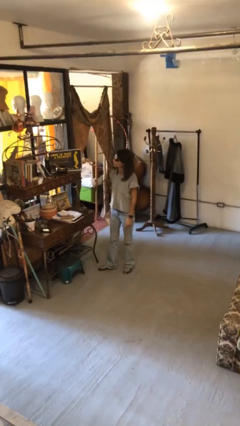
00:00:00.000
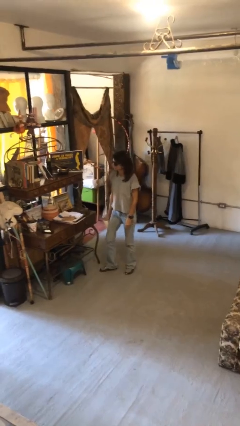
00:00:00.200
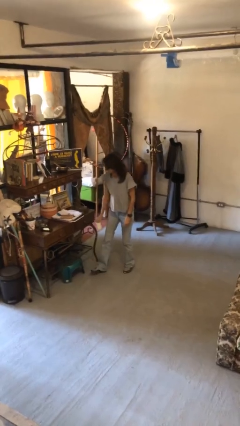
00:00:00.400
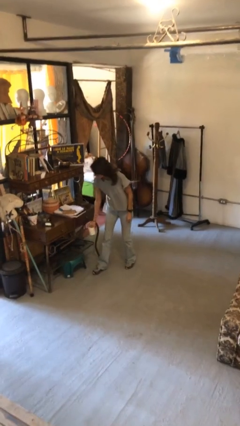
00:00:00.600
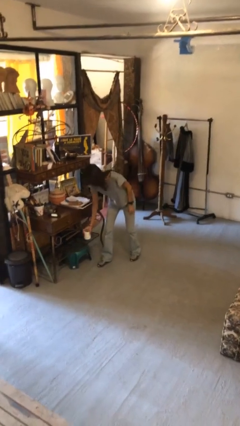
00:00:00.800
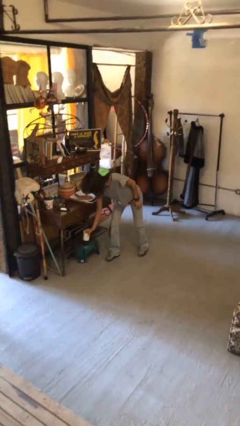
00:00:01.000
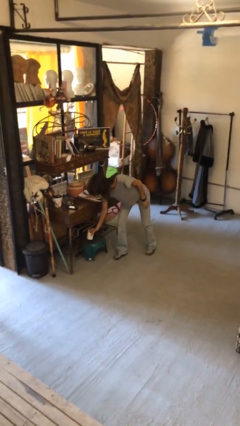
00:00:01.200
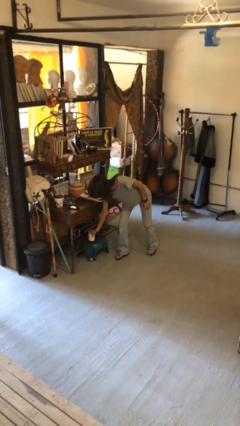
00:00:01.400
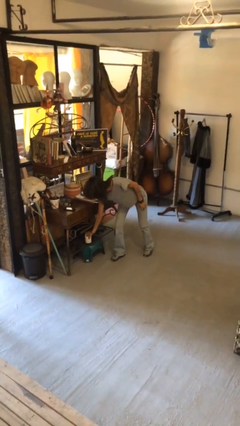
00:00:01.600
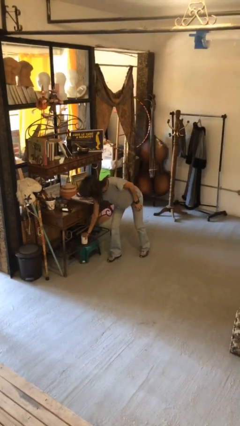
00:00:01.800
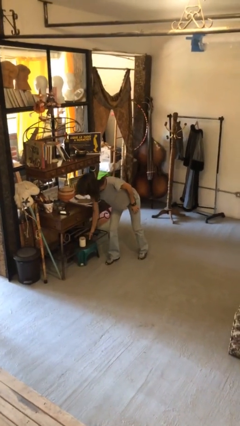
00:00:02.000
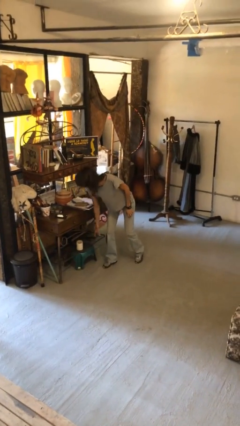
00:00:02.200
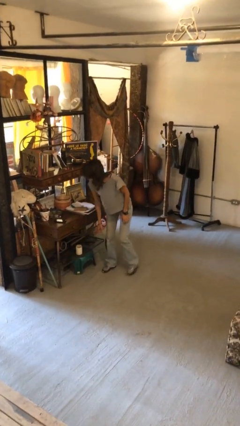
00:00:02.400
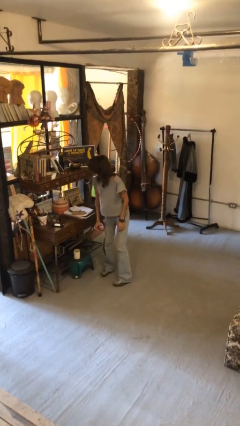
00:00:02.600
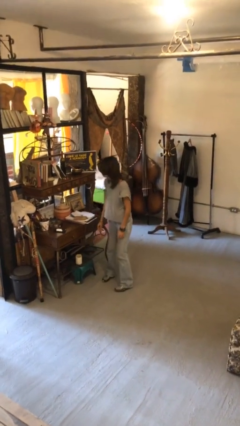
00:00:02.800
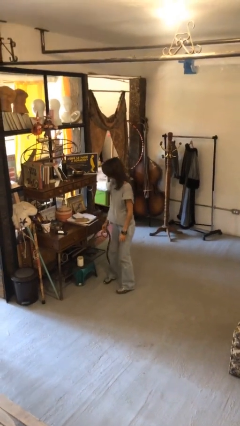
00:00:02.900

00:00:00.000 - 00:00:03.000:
person puts down object into cabinet

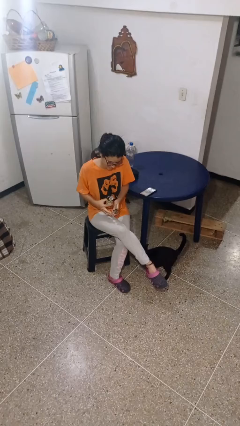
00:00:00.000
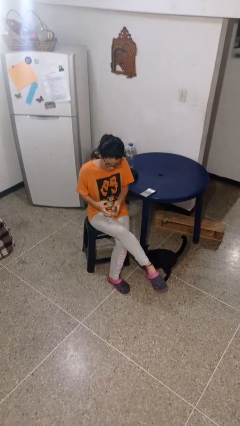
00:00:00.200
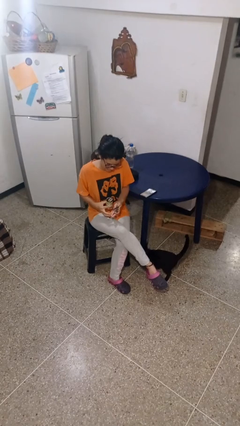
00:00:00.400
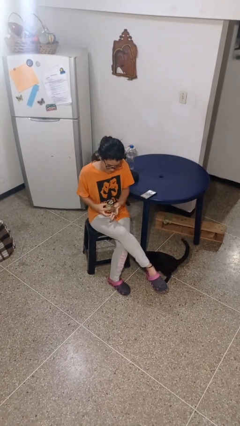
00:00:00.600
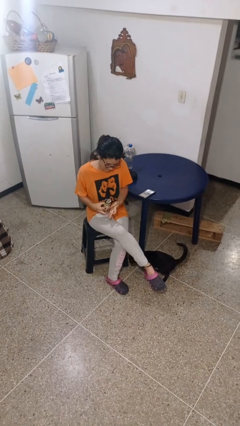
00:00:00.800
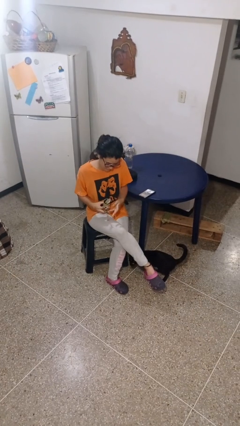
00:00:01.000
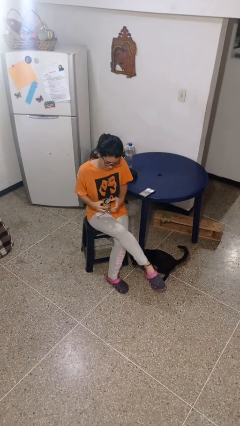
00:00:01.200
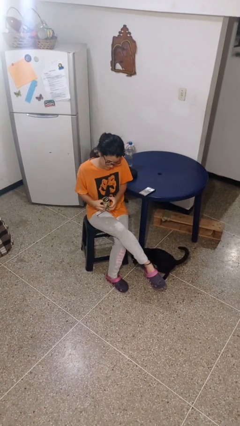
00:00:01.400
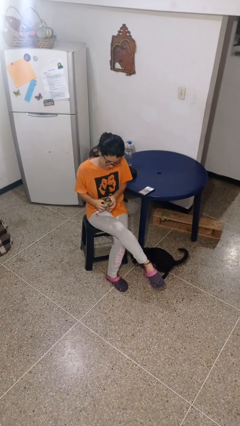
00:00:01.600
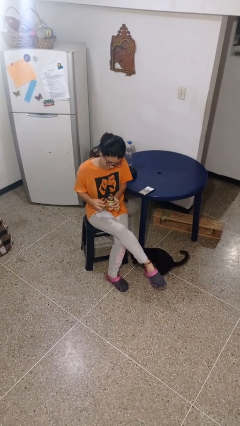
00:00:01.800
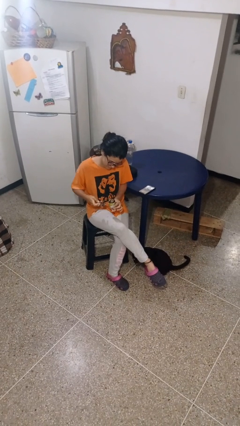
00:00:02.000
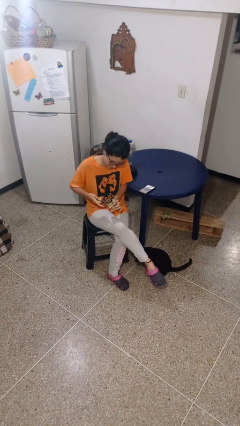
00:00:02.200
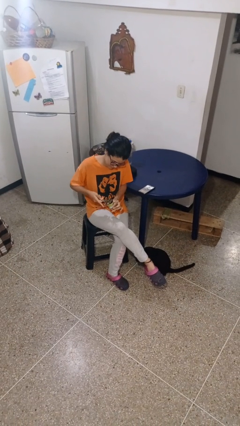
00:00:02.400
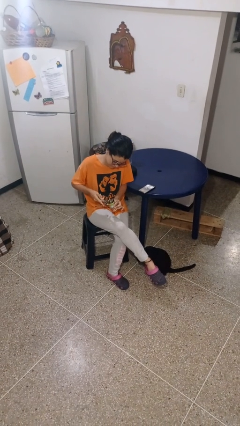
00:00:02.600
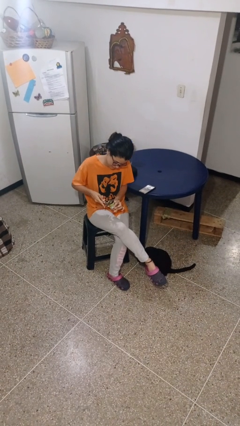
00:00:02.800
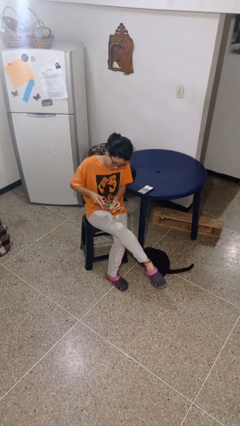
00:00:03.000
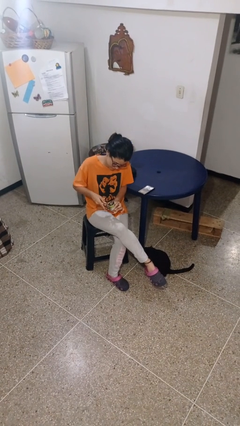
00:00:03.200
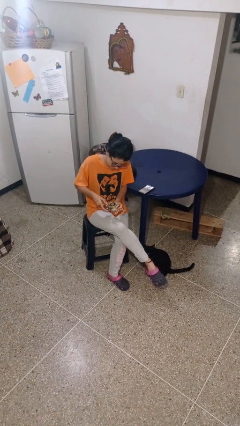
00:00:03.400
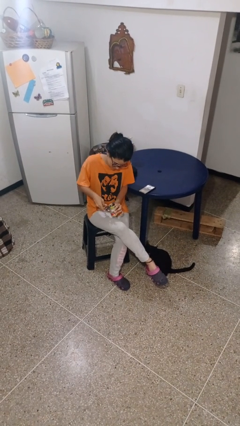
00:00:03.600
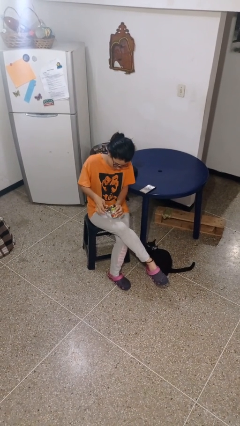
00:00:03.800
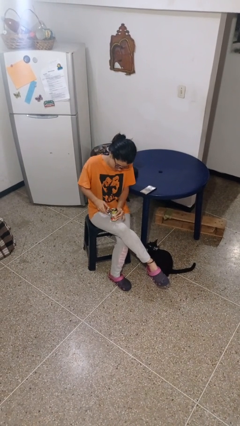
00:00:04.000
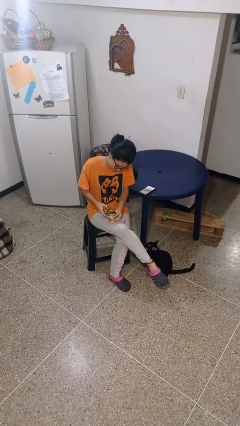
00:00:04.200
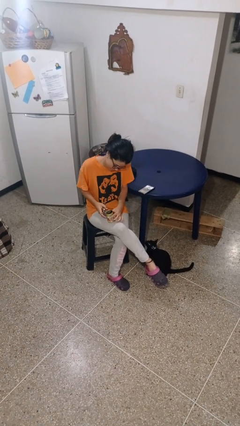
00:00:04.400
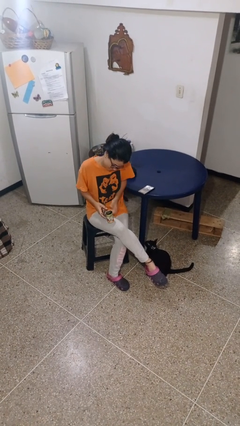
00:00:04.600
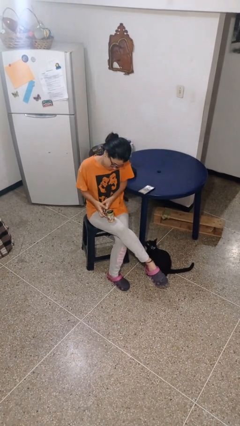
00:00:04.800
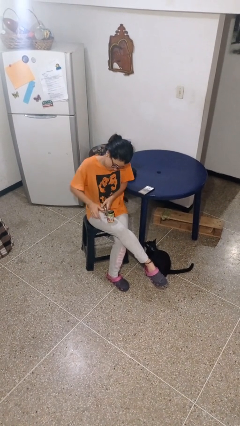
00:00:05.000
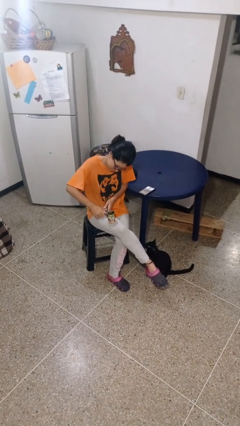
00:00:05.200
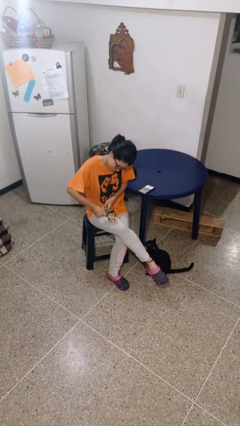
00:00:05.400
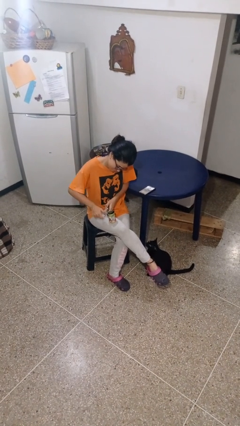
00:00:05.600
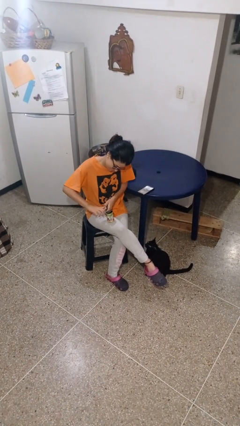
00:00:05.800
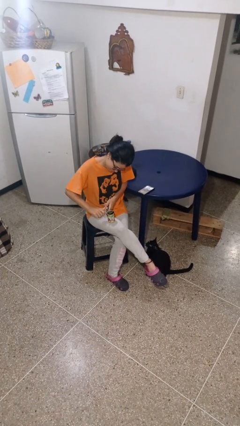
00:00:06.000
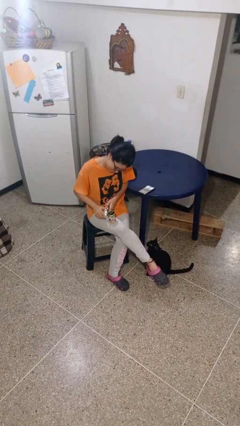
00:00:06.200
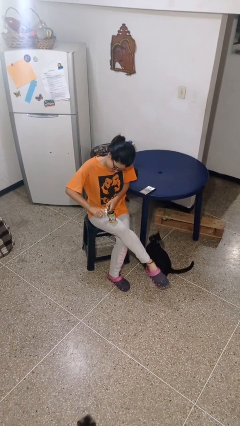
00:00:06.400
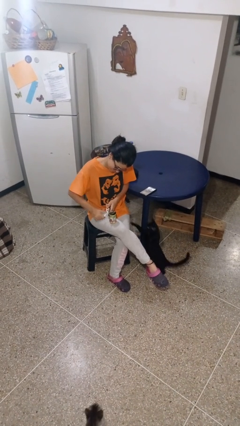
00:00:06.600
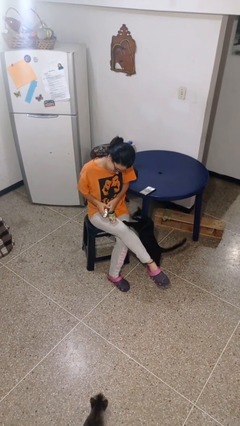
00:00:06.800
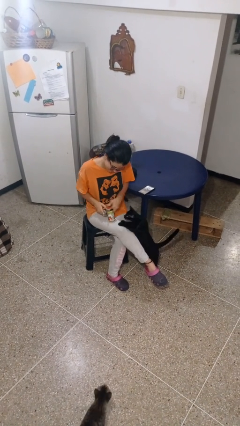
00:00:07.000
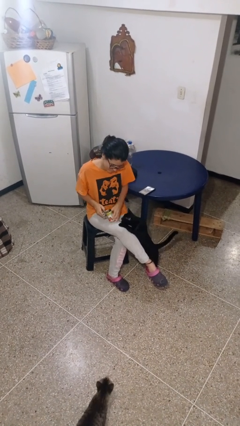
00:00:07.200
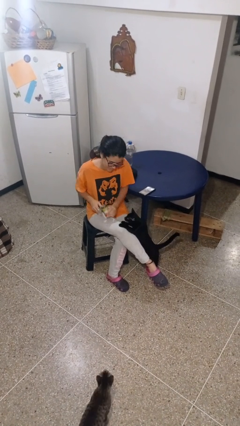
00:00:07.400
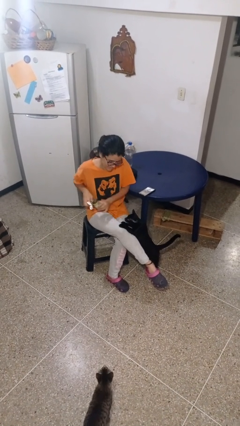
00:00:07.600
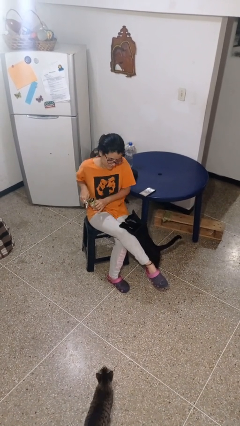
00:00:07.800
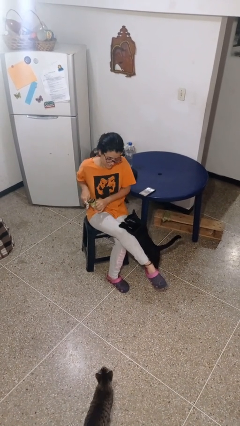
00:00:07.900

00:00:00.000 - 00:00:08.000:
person opens can with can opener

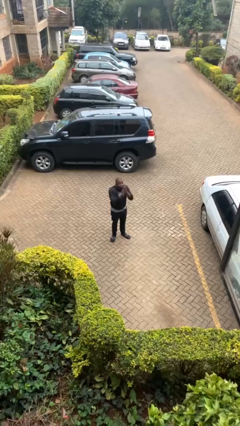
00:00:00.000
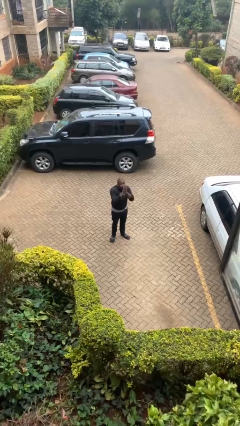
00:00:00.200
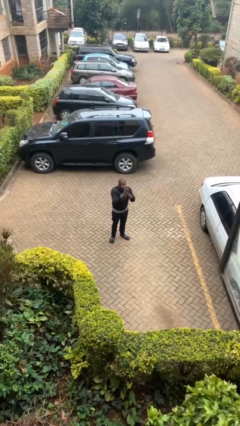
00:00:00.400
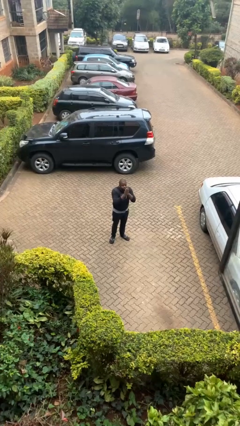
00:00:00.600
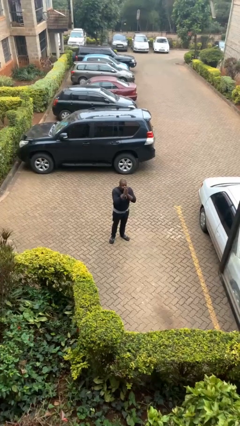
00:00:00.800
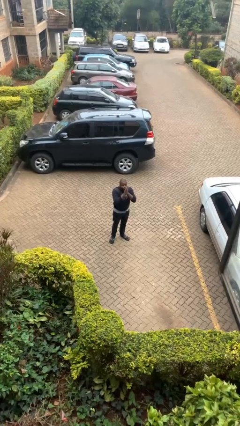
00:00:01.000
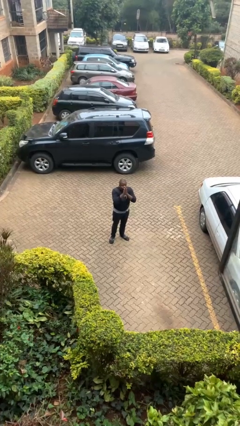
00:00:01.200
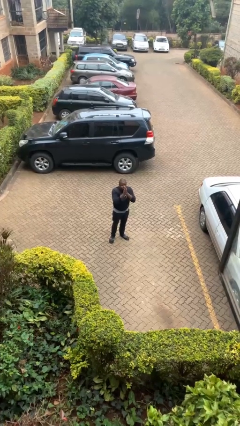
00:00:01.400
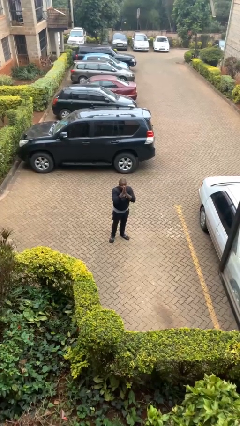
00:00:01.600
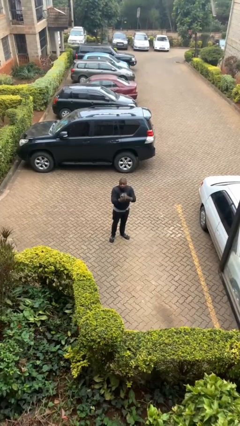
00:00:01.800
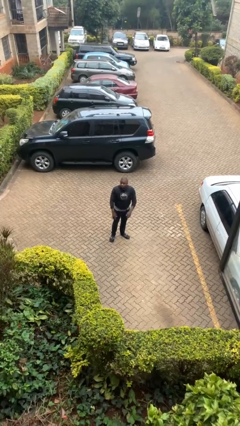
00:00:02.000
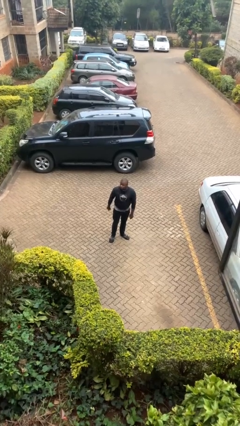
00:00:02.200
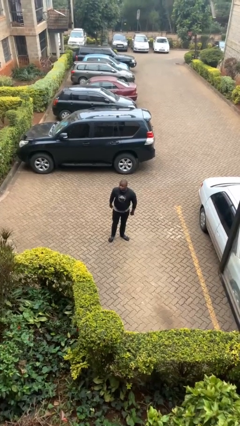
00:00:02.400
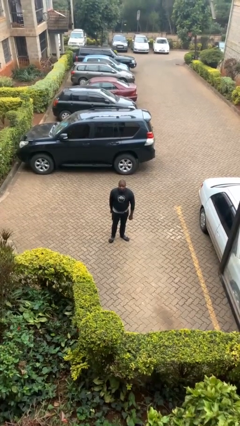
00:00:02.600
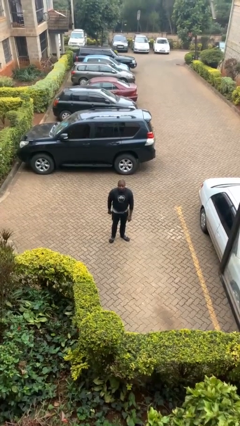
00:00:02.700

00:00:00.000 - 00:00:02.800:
person blows into hands

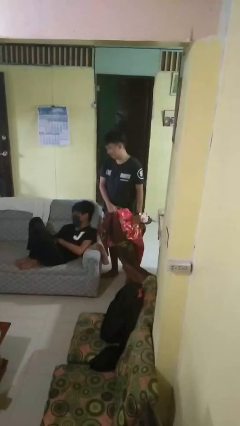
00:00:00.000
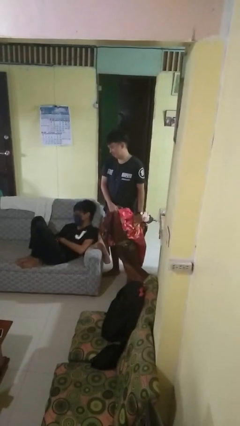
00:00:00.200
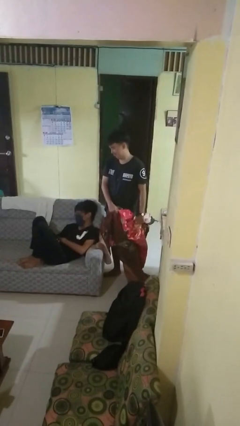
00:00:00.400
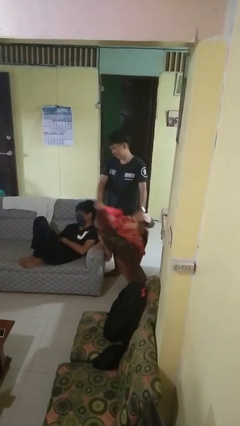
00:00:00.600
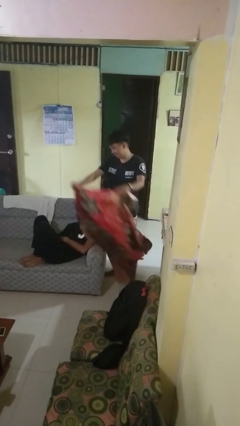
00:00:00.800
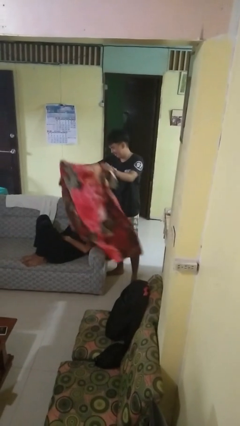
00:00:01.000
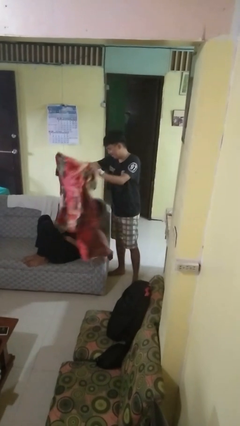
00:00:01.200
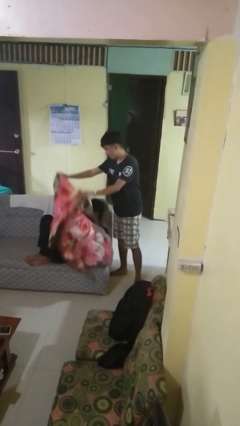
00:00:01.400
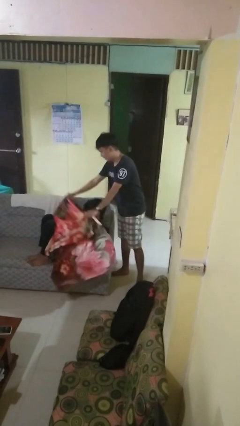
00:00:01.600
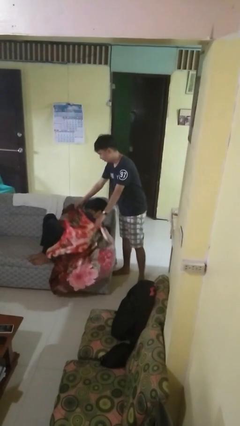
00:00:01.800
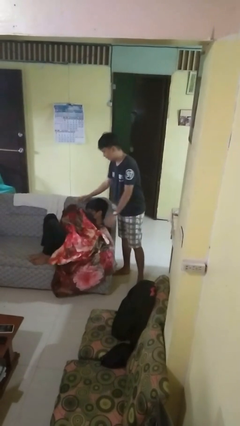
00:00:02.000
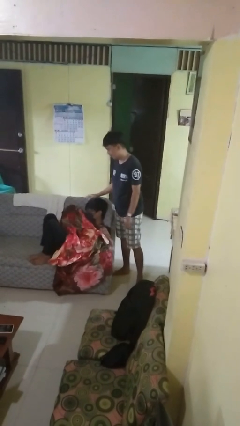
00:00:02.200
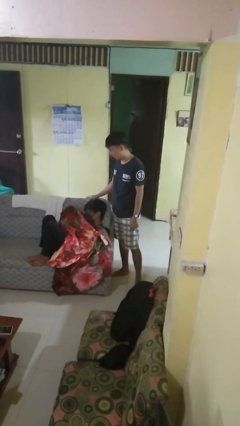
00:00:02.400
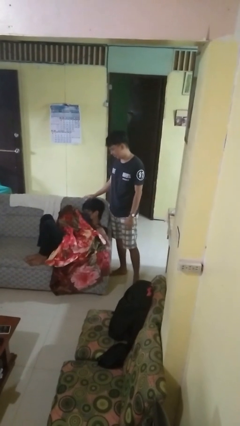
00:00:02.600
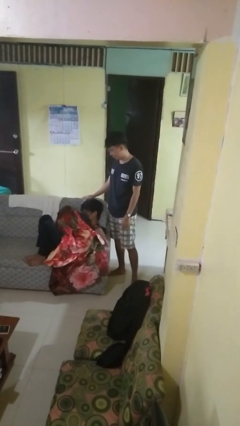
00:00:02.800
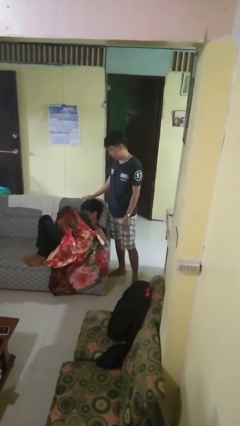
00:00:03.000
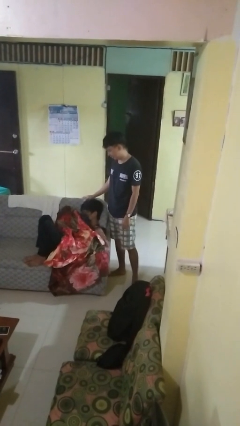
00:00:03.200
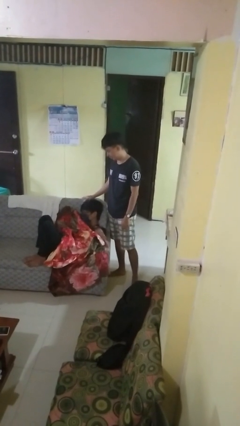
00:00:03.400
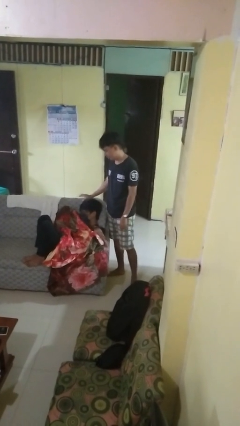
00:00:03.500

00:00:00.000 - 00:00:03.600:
person covers friend with blanket

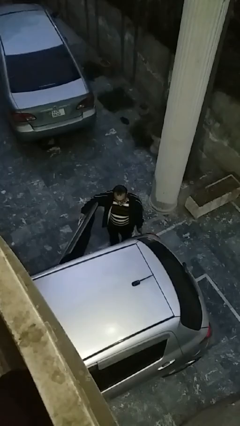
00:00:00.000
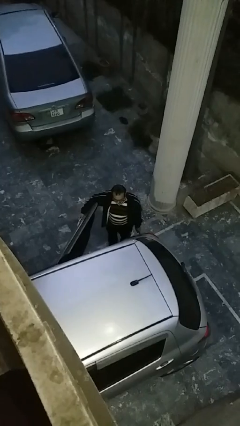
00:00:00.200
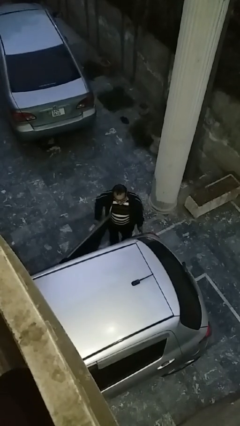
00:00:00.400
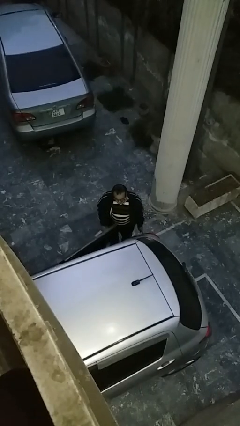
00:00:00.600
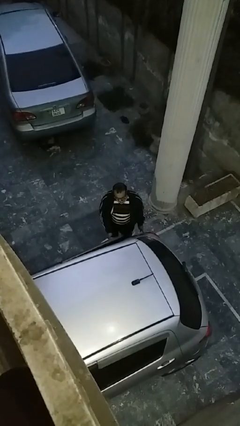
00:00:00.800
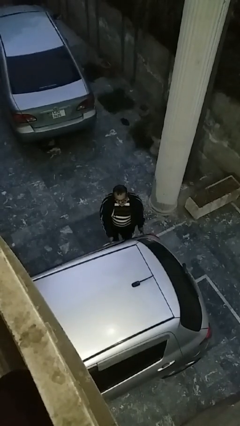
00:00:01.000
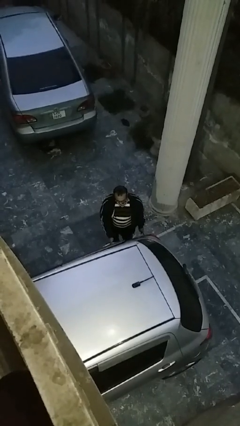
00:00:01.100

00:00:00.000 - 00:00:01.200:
person closes car door
